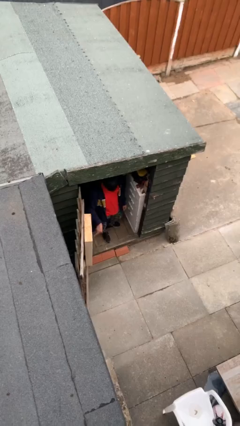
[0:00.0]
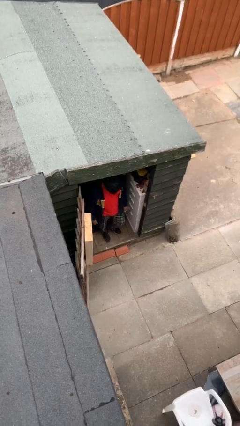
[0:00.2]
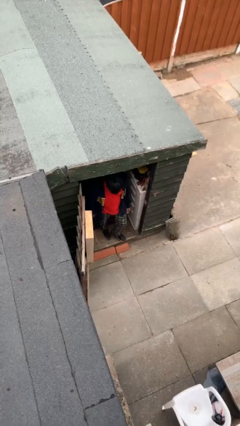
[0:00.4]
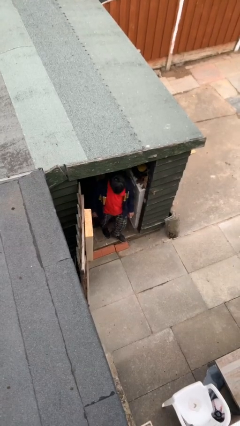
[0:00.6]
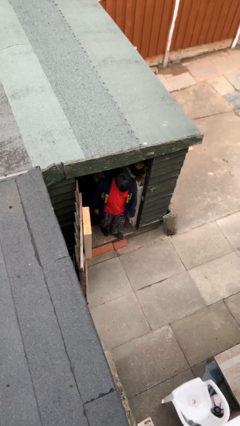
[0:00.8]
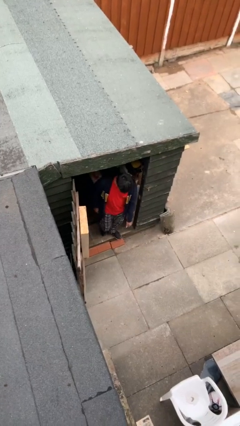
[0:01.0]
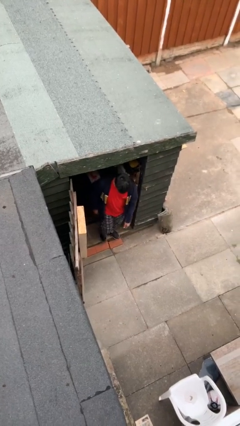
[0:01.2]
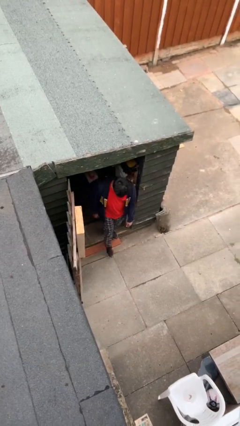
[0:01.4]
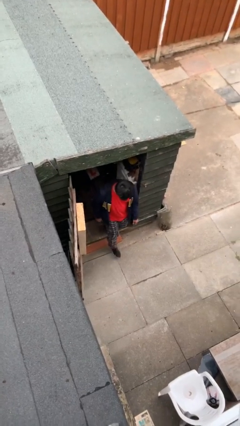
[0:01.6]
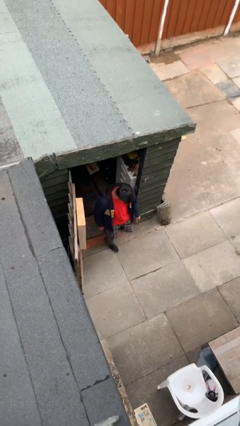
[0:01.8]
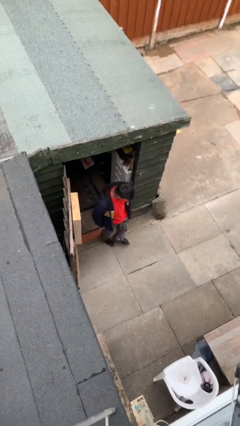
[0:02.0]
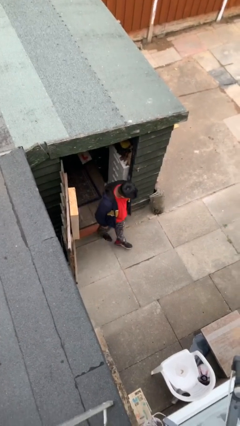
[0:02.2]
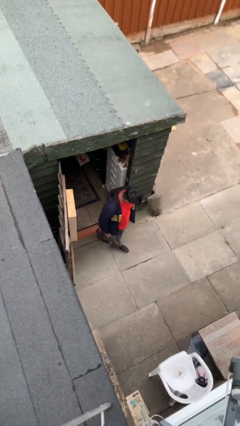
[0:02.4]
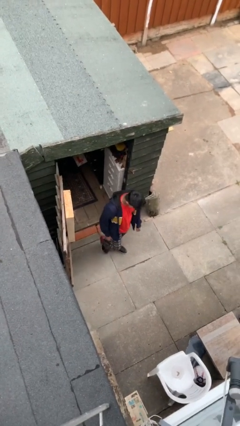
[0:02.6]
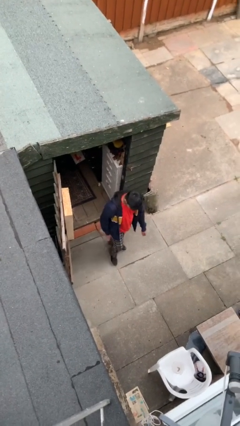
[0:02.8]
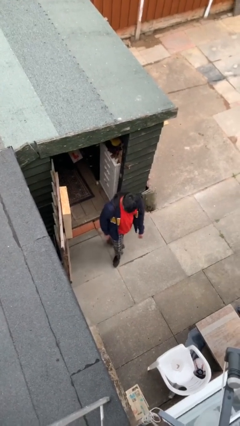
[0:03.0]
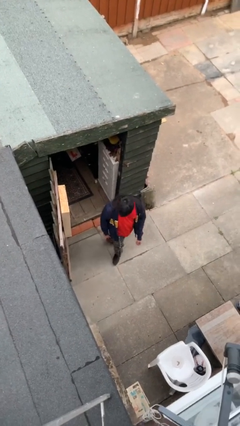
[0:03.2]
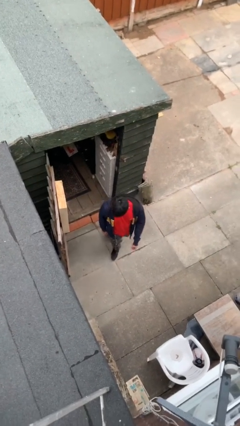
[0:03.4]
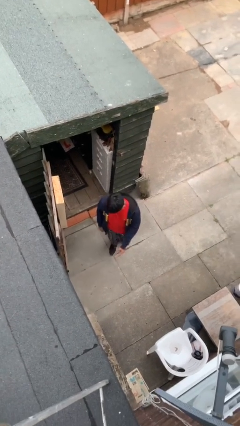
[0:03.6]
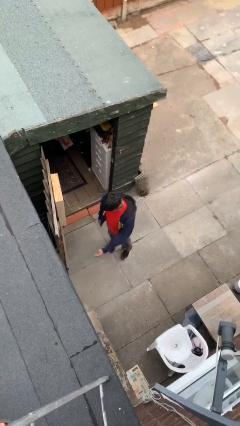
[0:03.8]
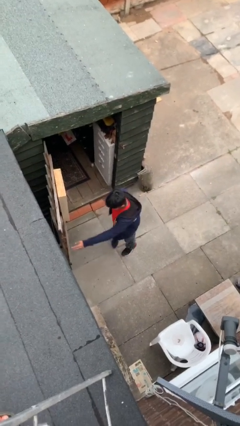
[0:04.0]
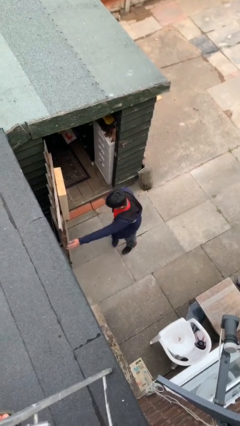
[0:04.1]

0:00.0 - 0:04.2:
person enters scene through structure

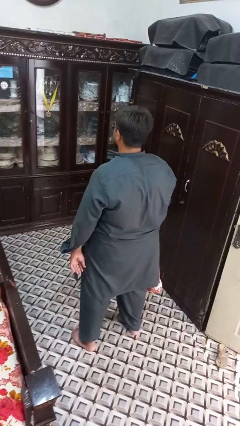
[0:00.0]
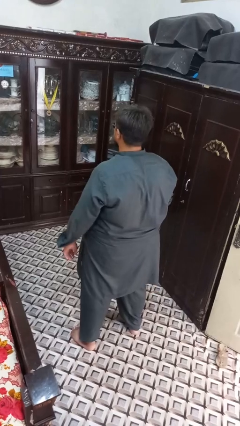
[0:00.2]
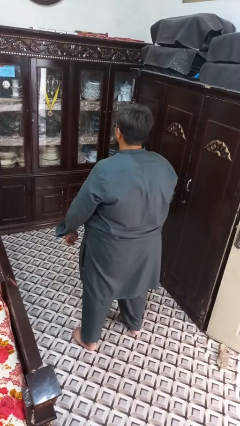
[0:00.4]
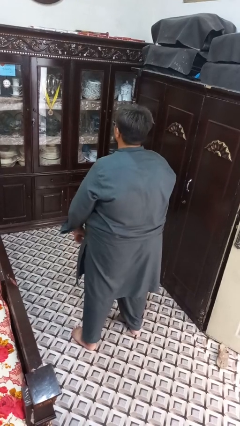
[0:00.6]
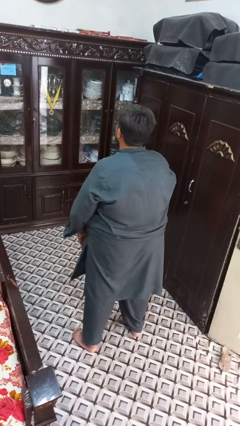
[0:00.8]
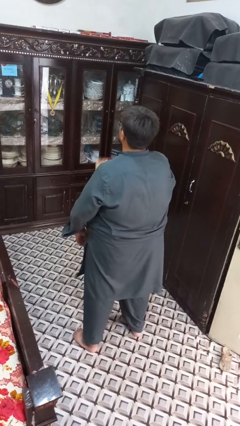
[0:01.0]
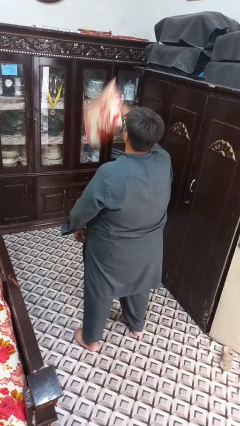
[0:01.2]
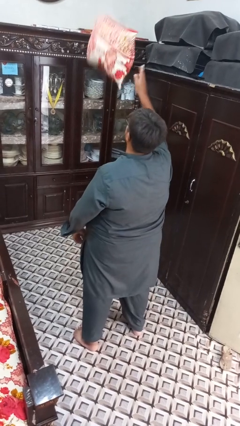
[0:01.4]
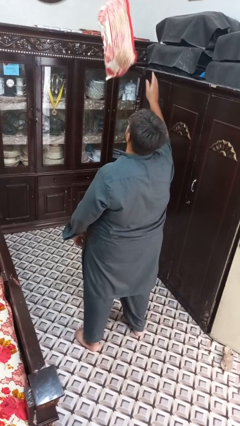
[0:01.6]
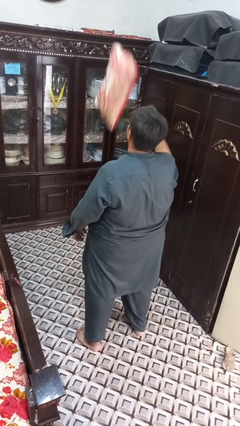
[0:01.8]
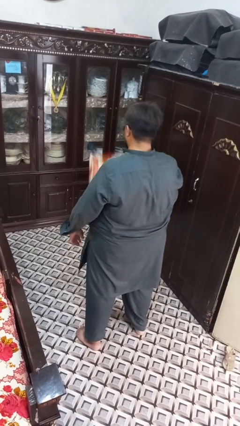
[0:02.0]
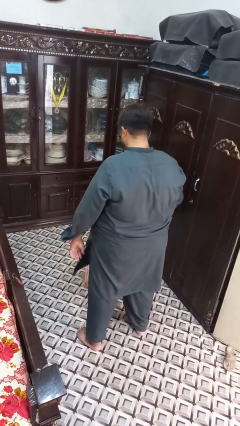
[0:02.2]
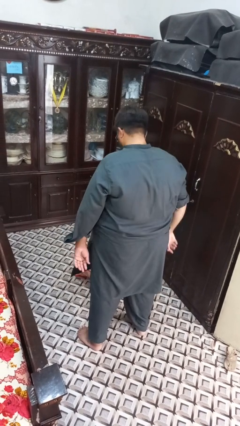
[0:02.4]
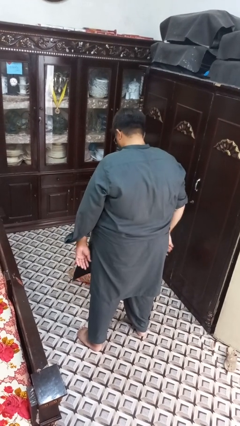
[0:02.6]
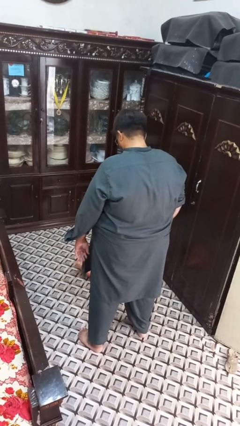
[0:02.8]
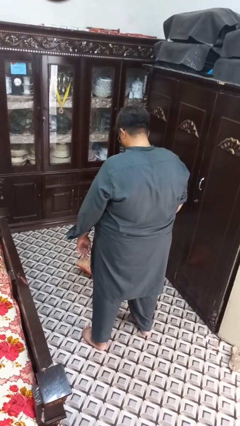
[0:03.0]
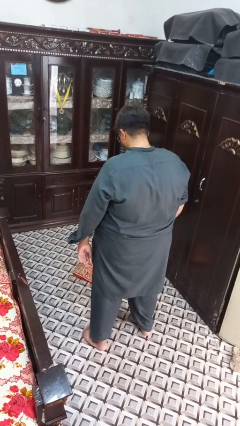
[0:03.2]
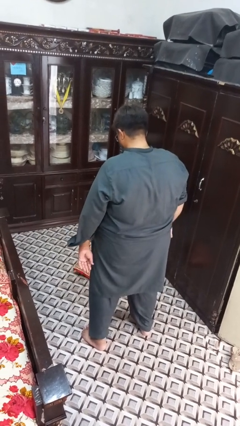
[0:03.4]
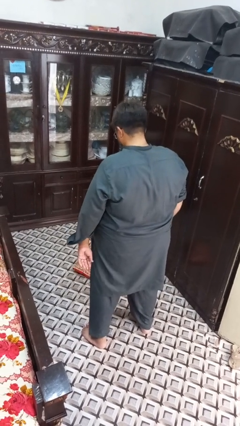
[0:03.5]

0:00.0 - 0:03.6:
person throws object into air

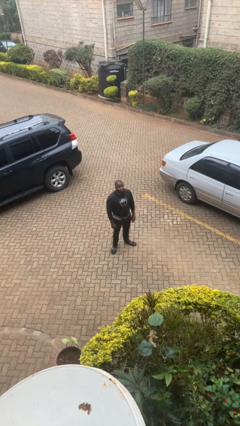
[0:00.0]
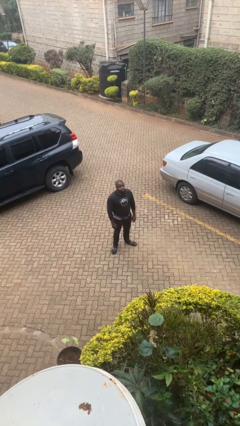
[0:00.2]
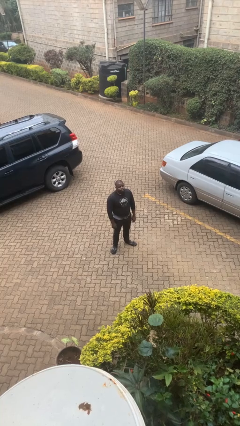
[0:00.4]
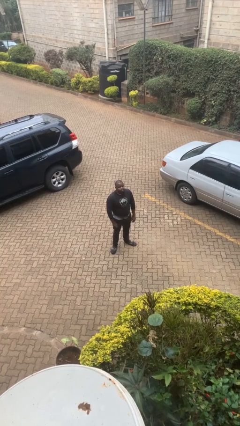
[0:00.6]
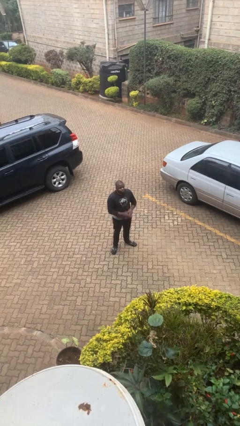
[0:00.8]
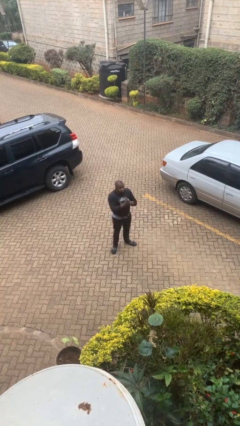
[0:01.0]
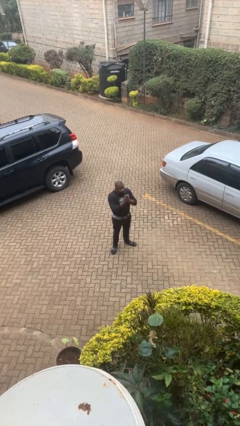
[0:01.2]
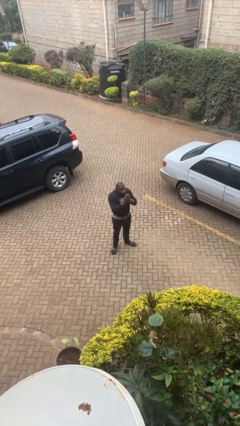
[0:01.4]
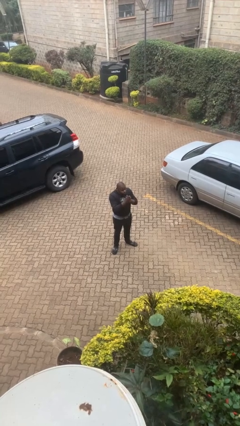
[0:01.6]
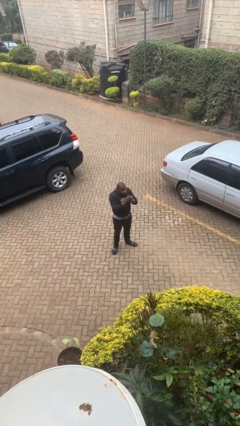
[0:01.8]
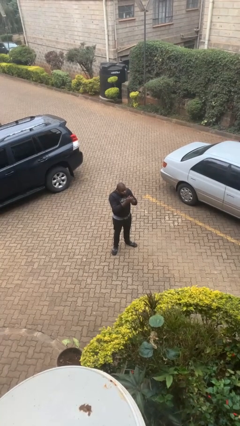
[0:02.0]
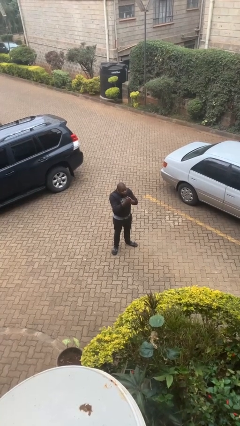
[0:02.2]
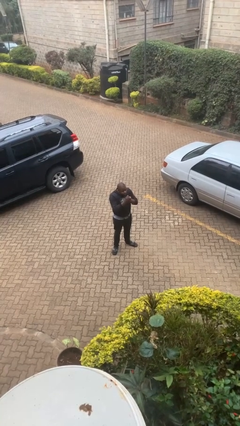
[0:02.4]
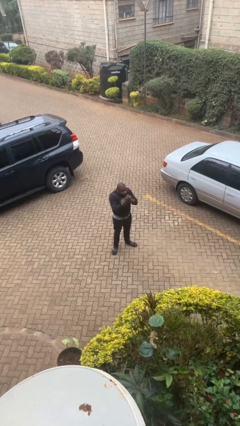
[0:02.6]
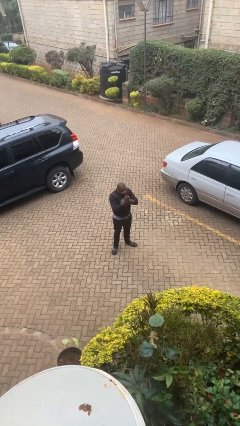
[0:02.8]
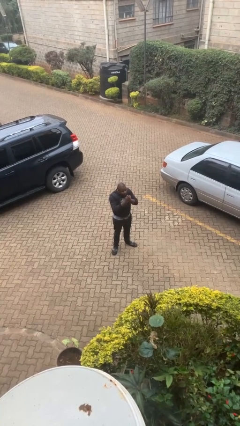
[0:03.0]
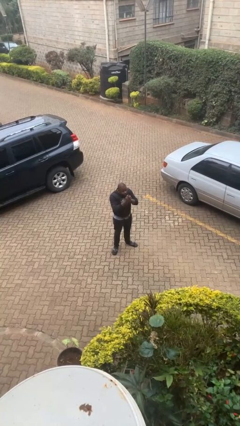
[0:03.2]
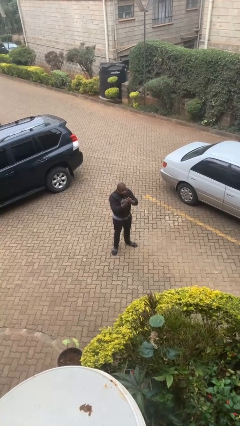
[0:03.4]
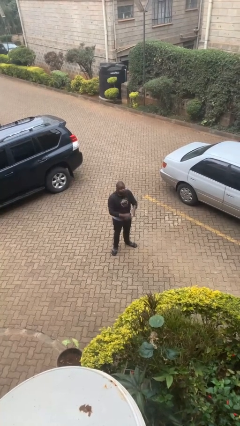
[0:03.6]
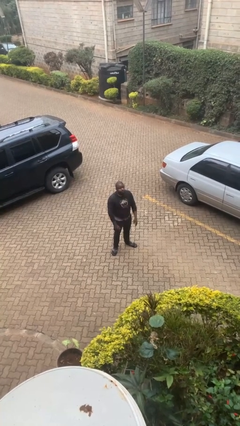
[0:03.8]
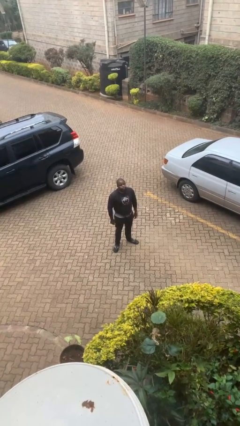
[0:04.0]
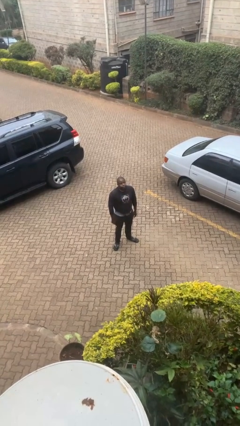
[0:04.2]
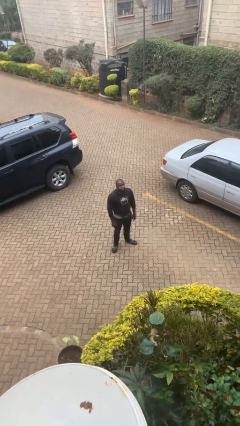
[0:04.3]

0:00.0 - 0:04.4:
person blows into hands

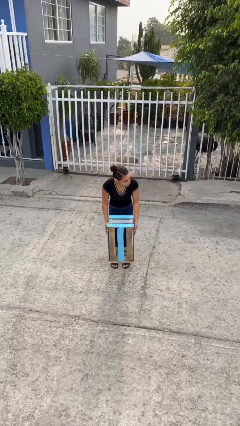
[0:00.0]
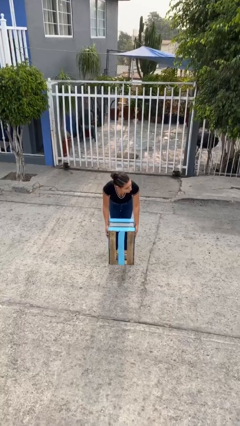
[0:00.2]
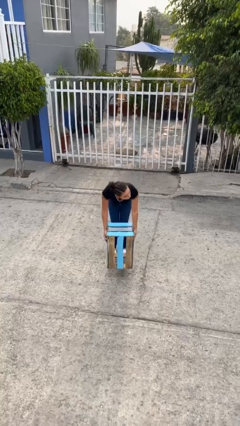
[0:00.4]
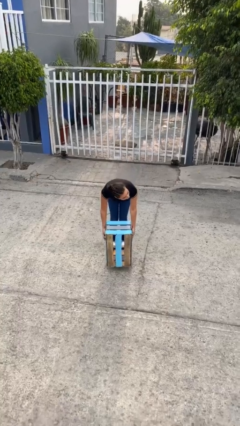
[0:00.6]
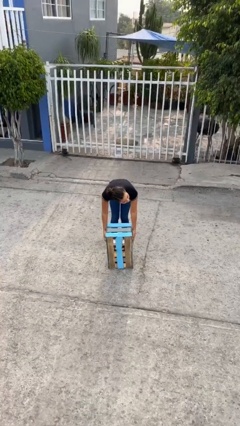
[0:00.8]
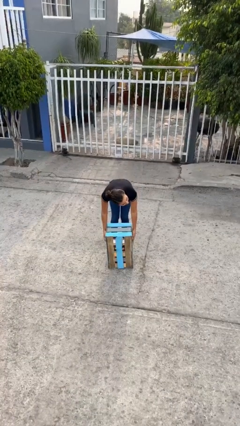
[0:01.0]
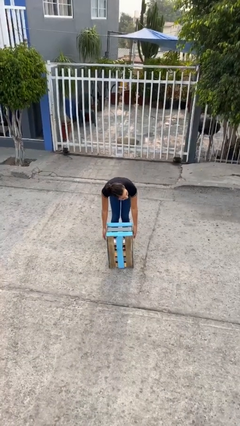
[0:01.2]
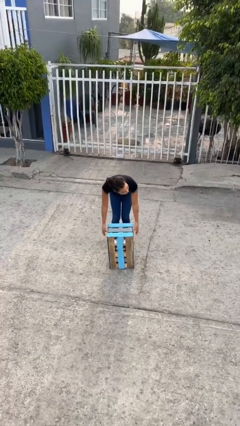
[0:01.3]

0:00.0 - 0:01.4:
person puts down object on floor

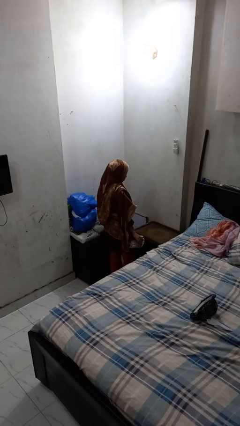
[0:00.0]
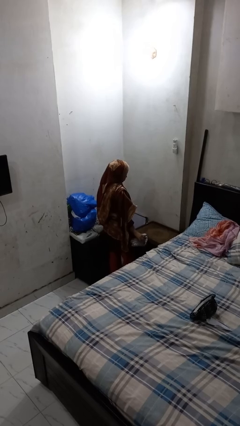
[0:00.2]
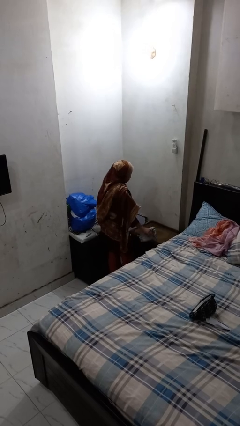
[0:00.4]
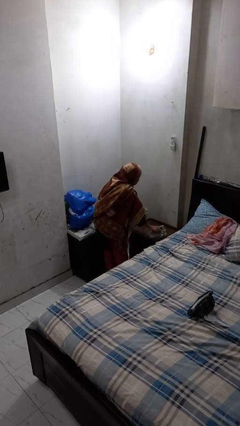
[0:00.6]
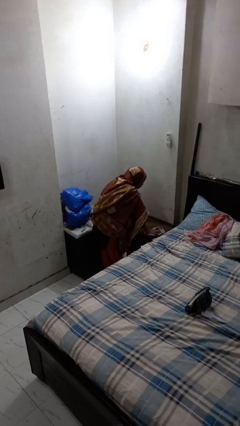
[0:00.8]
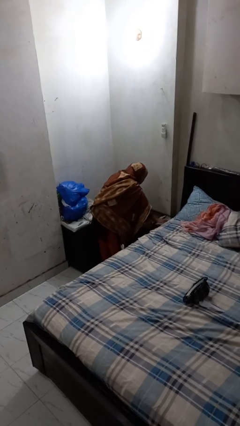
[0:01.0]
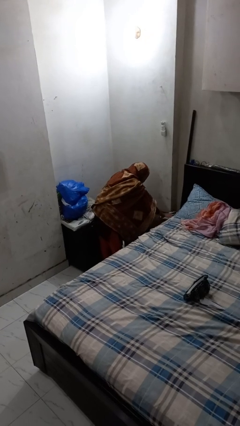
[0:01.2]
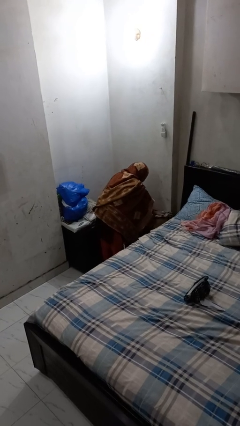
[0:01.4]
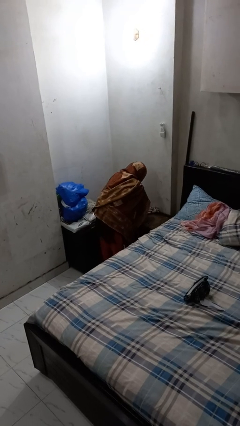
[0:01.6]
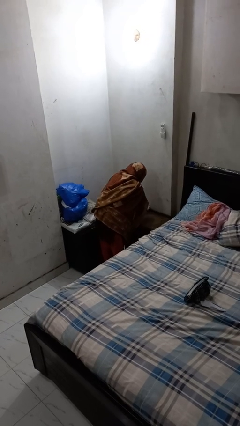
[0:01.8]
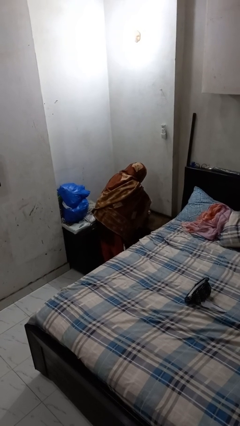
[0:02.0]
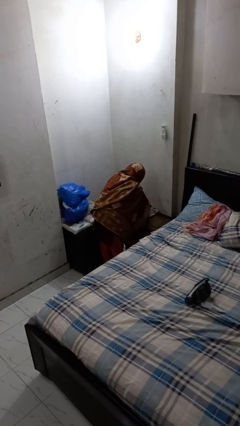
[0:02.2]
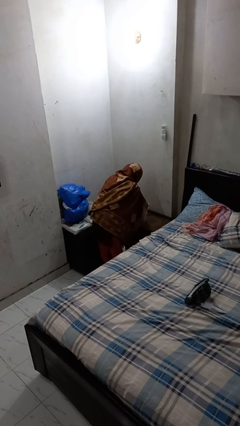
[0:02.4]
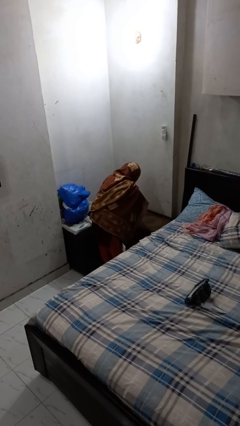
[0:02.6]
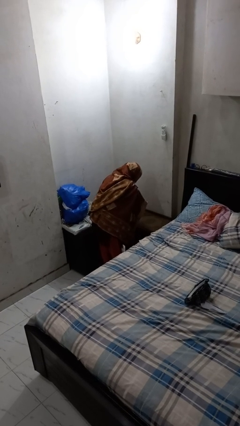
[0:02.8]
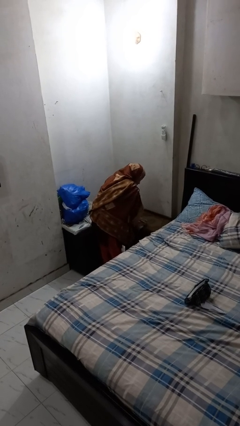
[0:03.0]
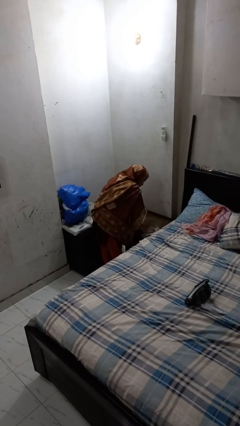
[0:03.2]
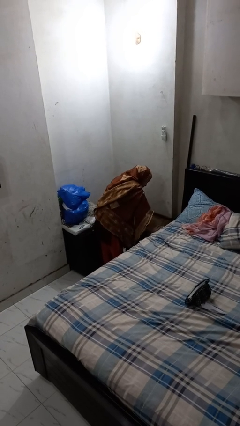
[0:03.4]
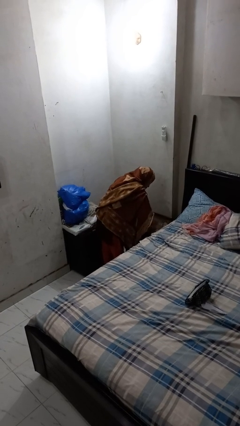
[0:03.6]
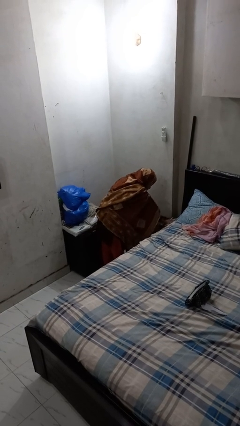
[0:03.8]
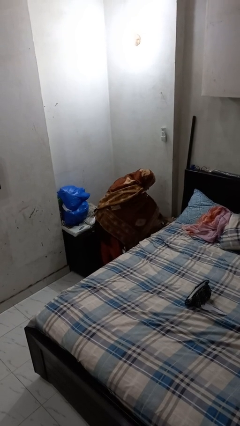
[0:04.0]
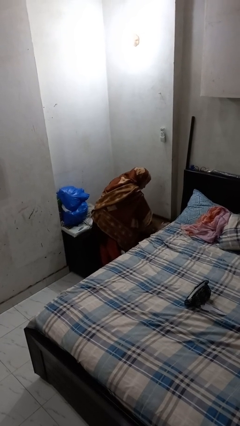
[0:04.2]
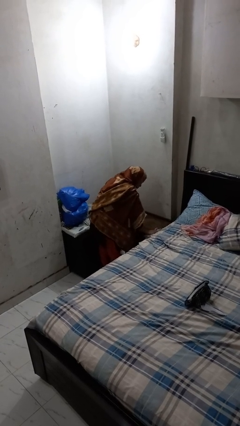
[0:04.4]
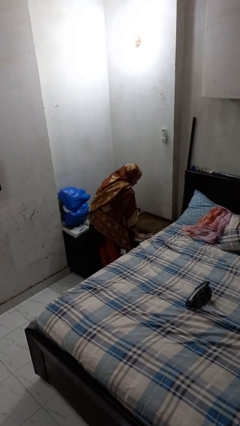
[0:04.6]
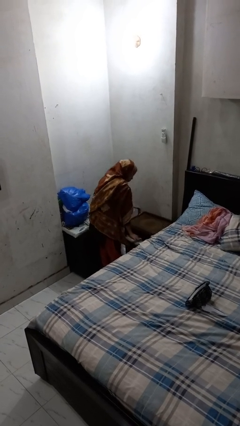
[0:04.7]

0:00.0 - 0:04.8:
person cleans table with rag
